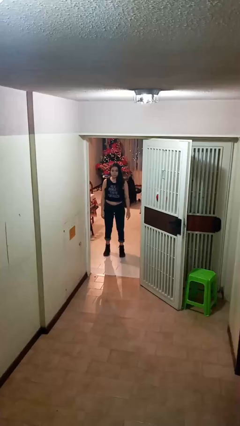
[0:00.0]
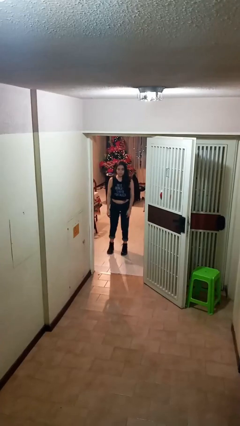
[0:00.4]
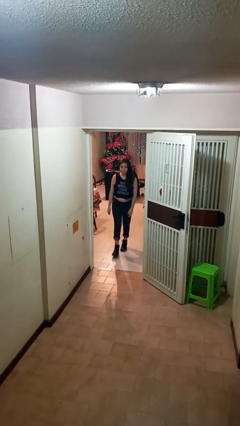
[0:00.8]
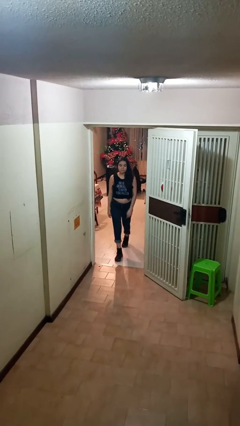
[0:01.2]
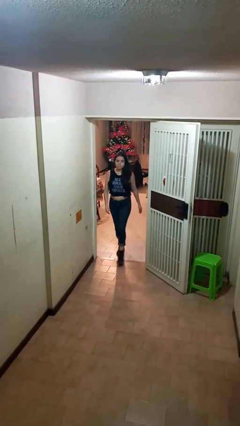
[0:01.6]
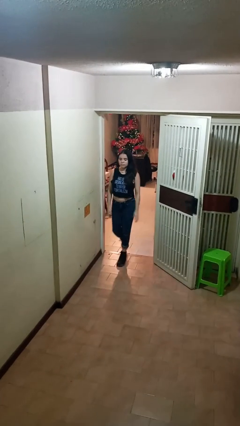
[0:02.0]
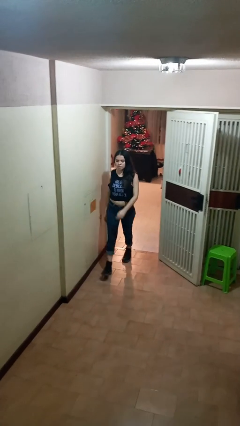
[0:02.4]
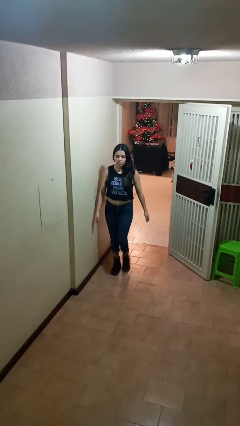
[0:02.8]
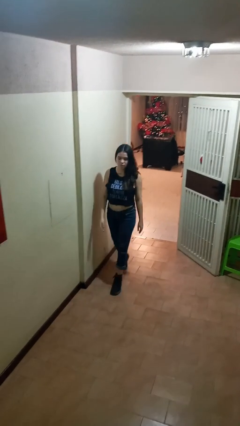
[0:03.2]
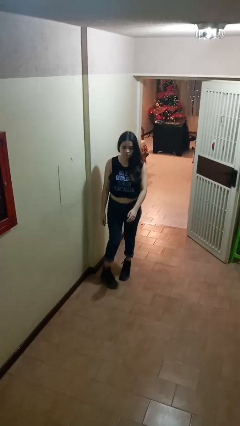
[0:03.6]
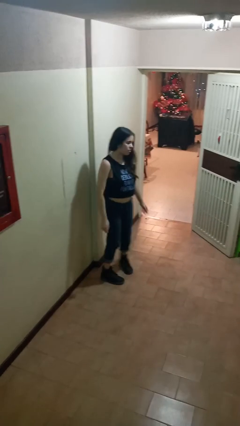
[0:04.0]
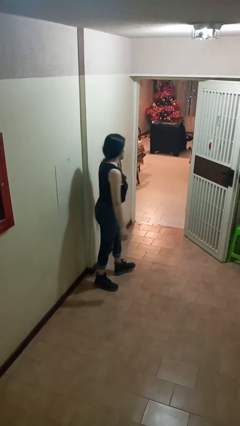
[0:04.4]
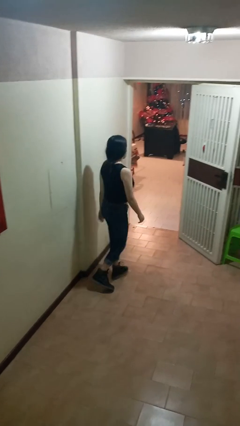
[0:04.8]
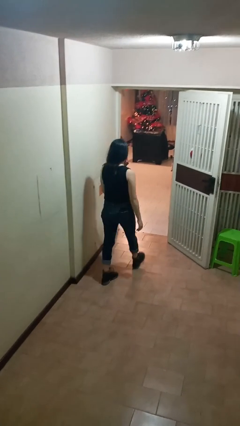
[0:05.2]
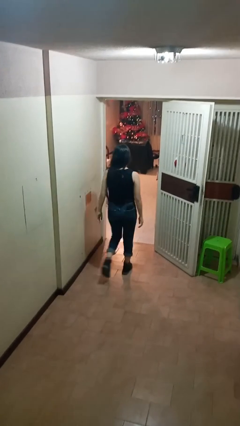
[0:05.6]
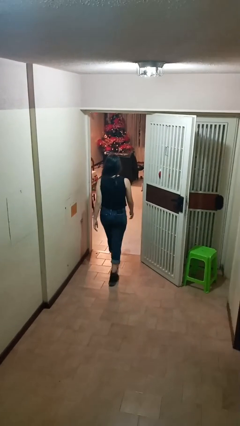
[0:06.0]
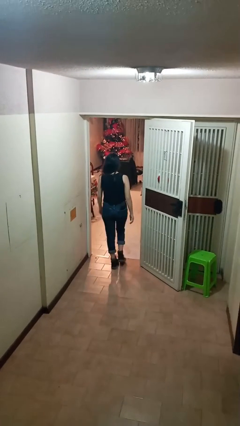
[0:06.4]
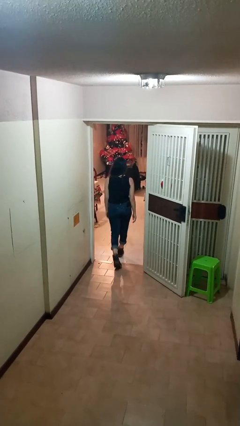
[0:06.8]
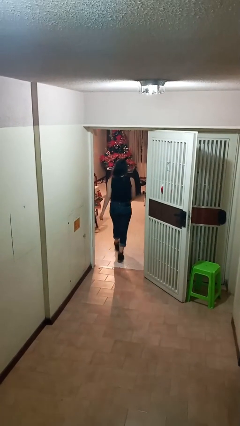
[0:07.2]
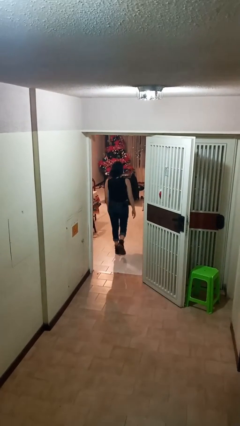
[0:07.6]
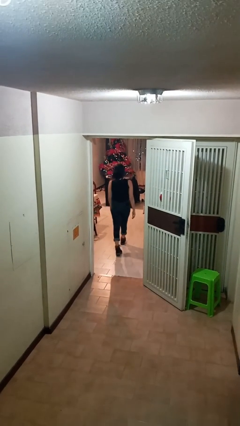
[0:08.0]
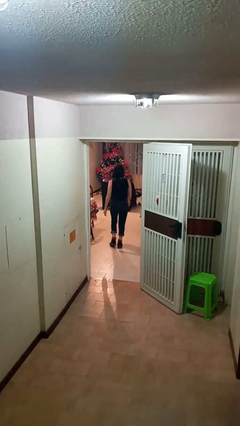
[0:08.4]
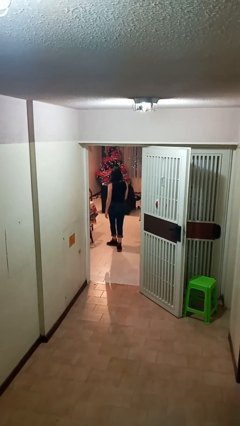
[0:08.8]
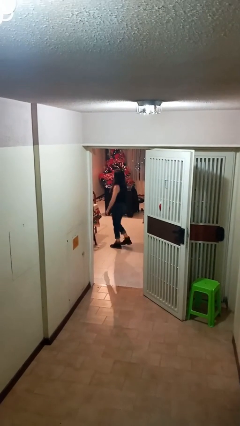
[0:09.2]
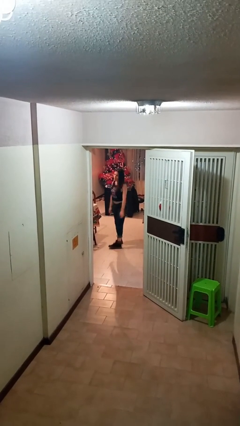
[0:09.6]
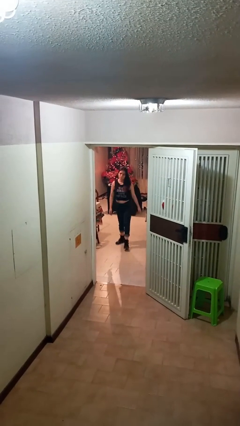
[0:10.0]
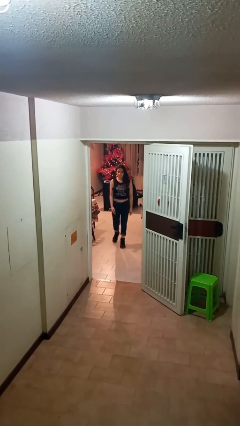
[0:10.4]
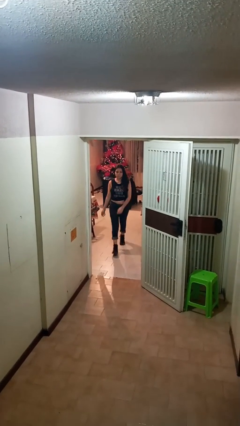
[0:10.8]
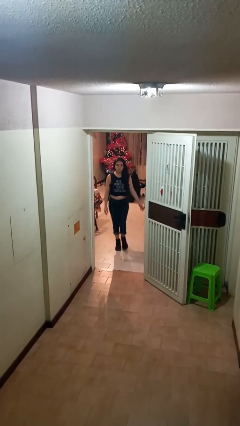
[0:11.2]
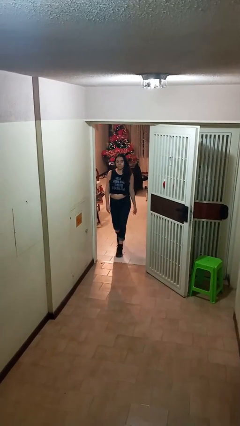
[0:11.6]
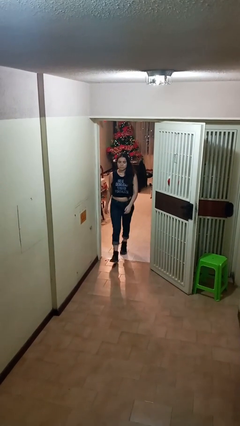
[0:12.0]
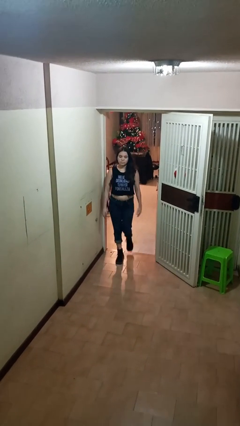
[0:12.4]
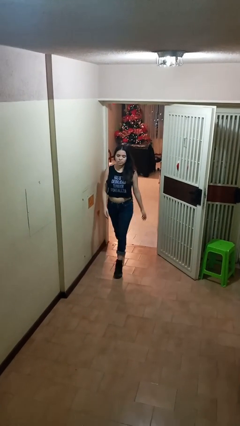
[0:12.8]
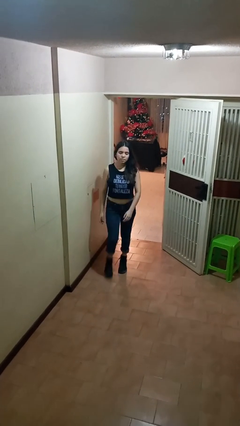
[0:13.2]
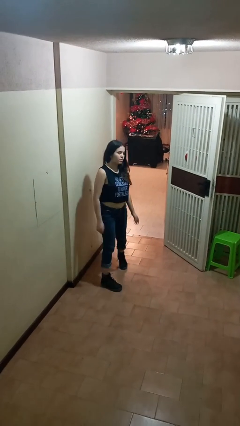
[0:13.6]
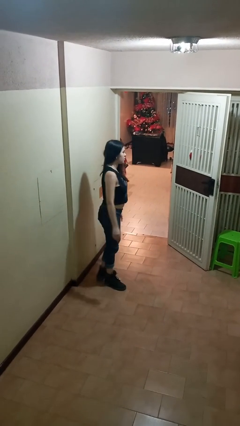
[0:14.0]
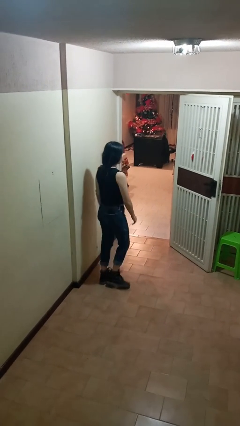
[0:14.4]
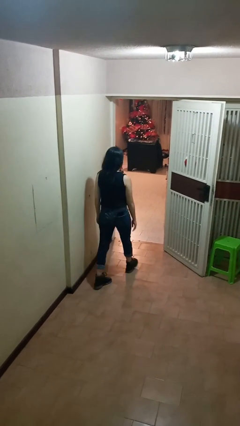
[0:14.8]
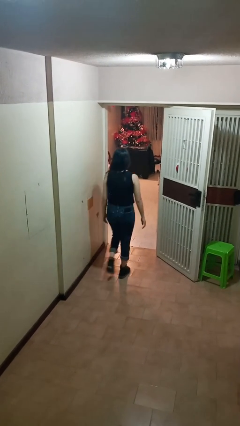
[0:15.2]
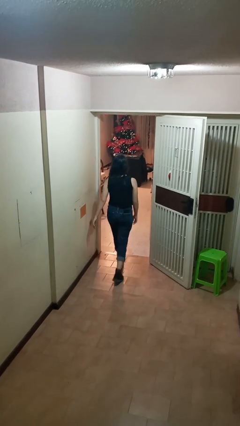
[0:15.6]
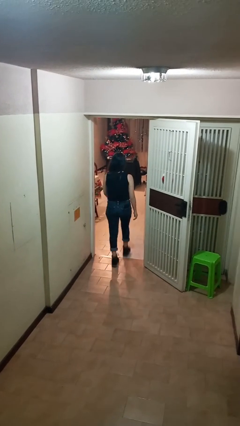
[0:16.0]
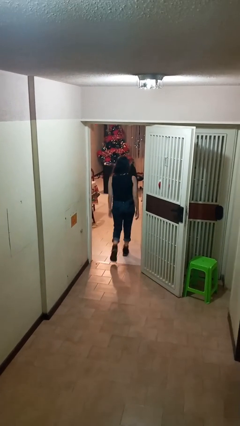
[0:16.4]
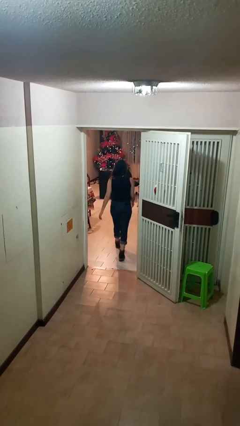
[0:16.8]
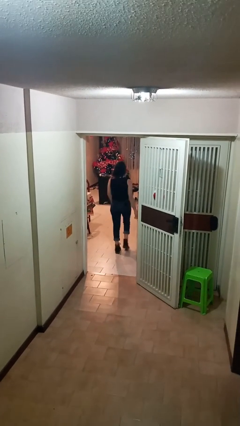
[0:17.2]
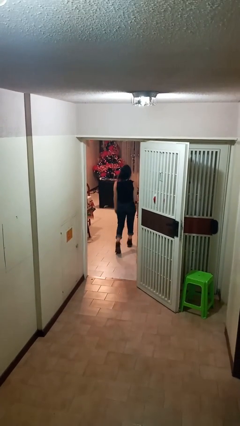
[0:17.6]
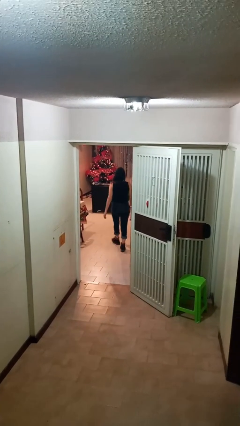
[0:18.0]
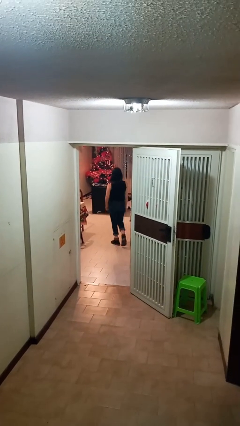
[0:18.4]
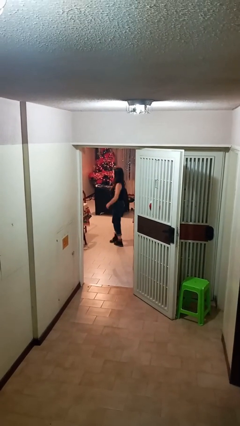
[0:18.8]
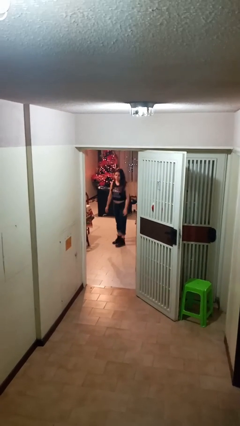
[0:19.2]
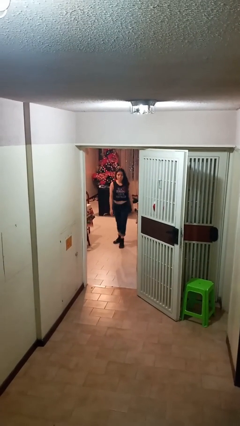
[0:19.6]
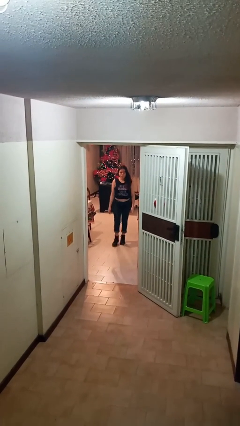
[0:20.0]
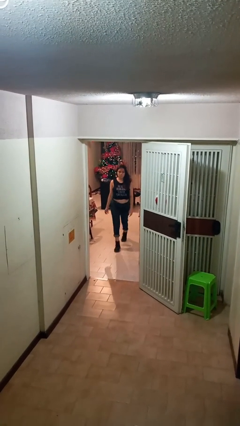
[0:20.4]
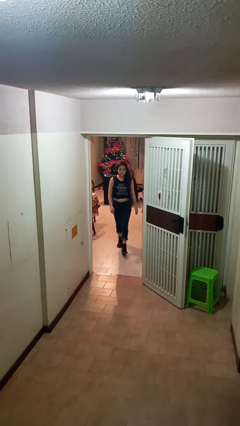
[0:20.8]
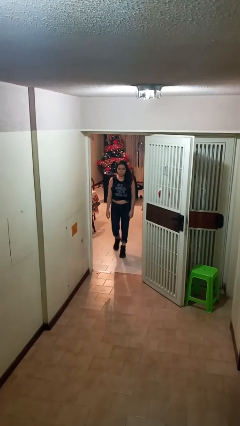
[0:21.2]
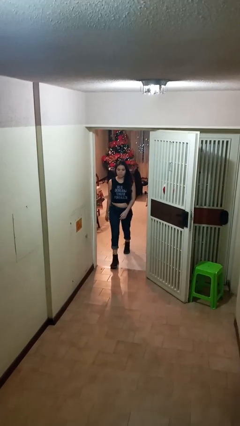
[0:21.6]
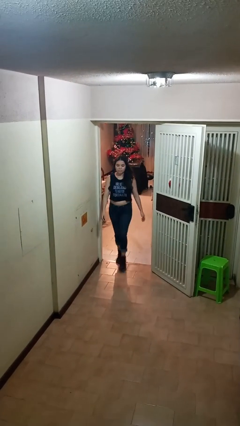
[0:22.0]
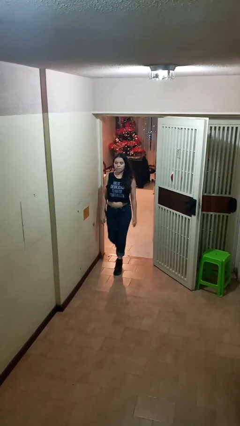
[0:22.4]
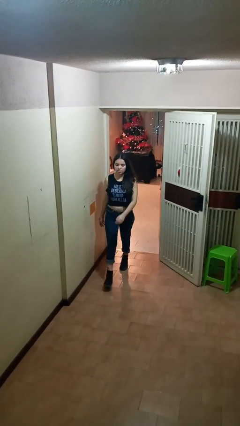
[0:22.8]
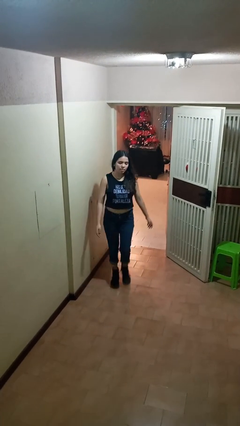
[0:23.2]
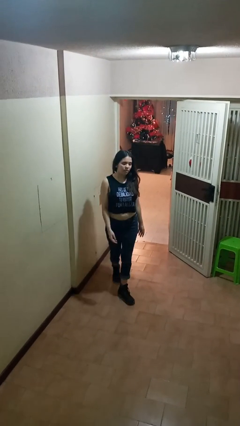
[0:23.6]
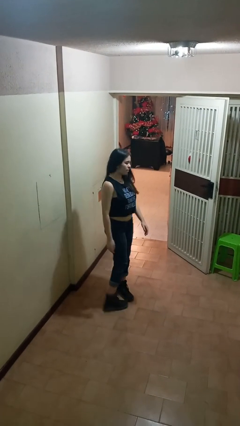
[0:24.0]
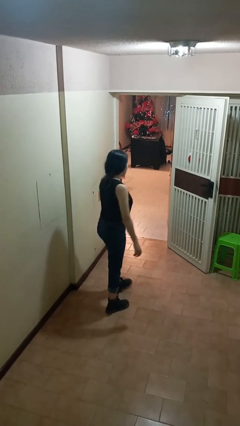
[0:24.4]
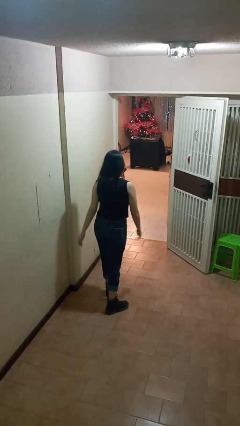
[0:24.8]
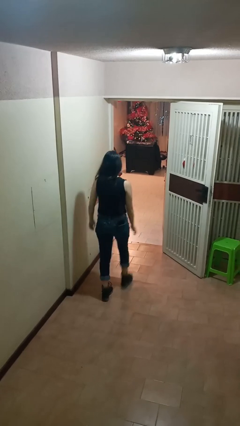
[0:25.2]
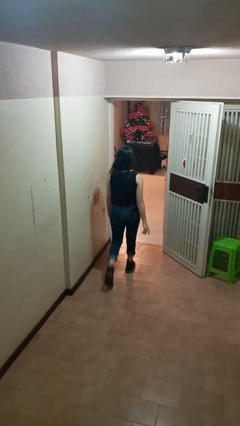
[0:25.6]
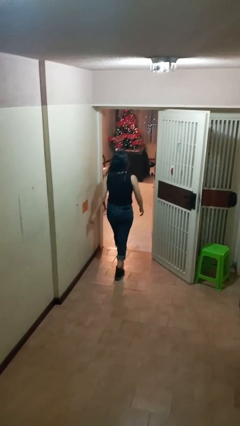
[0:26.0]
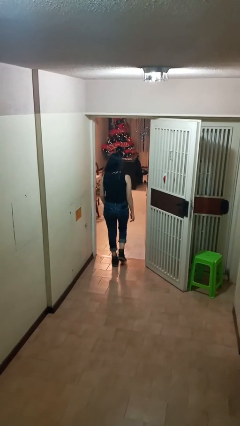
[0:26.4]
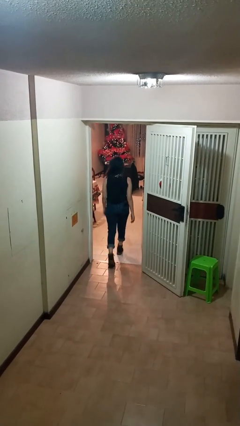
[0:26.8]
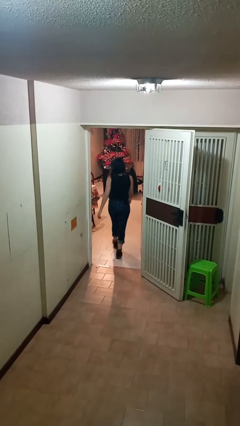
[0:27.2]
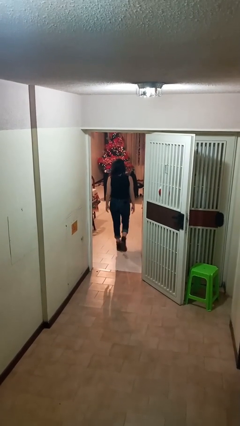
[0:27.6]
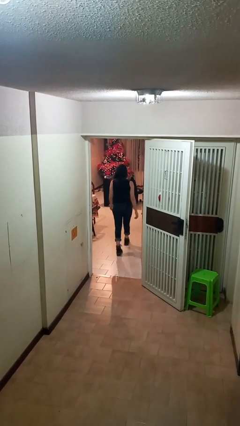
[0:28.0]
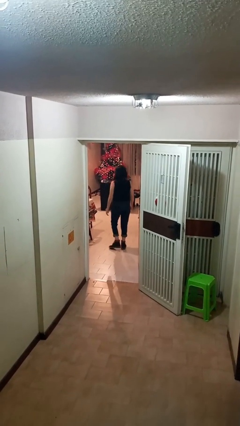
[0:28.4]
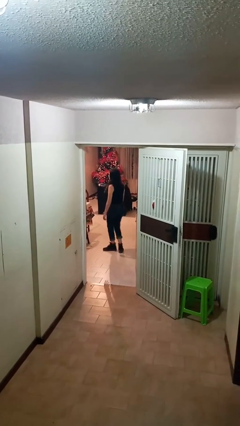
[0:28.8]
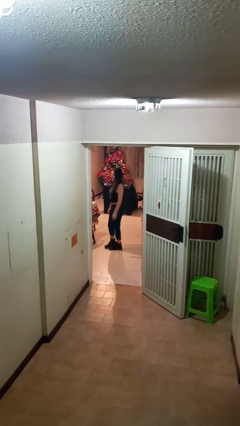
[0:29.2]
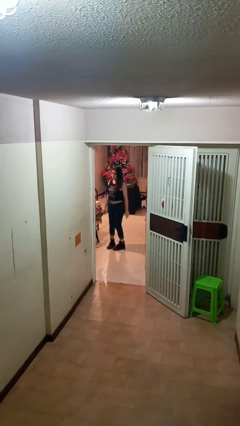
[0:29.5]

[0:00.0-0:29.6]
person walks

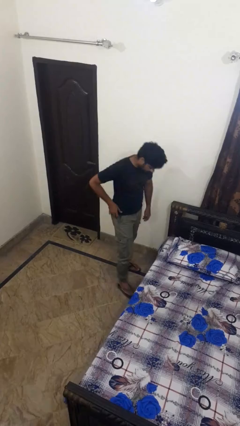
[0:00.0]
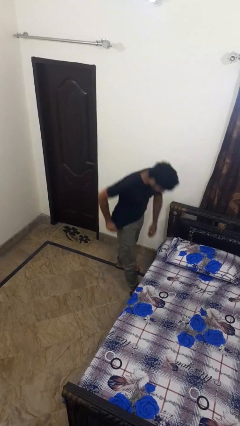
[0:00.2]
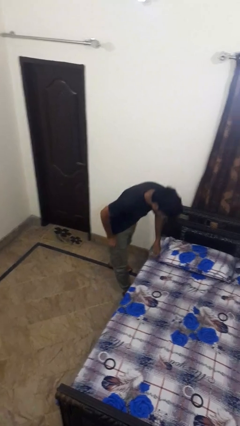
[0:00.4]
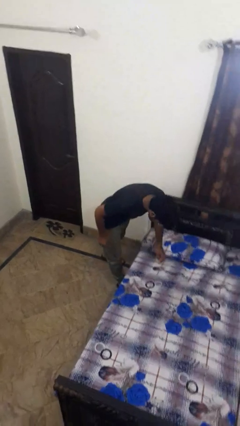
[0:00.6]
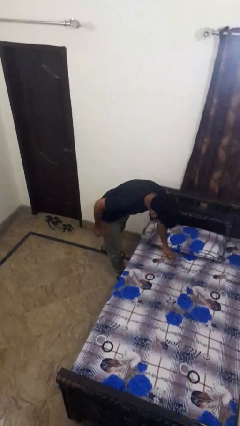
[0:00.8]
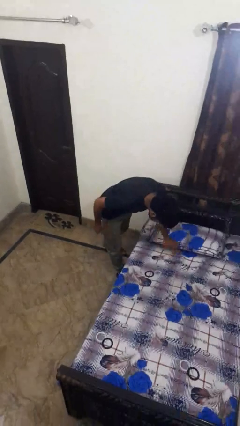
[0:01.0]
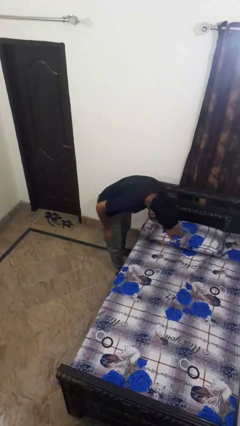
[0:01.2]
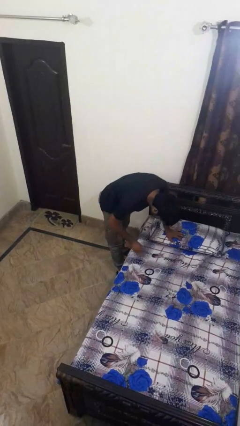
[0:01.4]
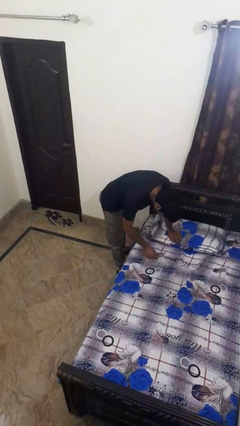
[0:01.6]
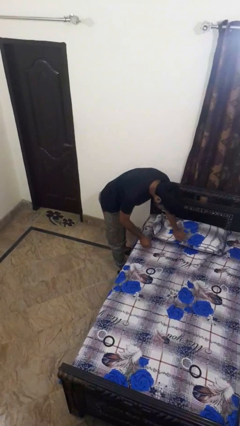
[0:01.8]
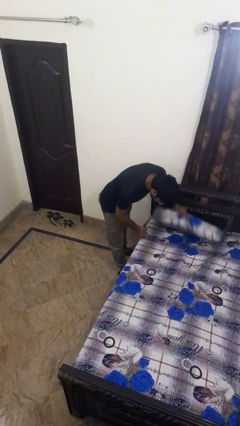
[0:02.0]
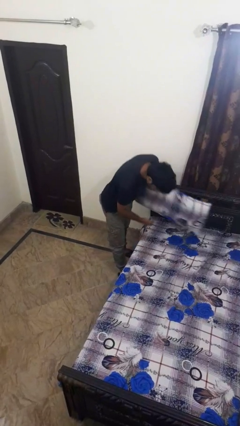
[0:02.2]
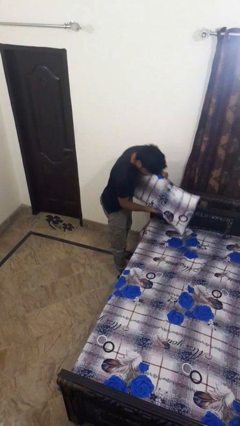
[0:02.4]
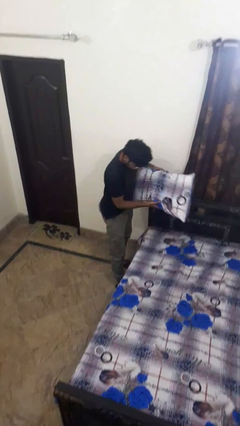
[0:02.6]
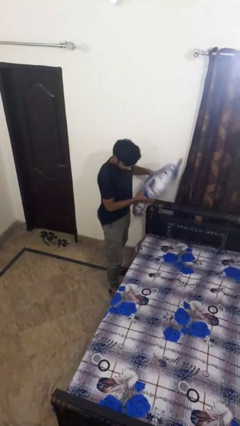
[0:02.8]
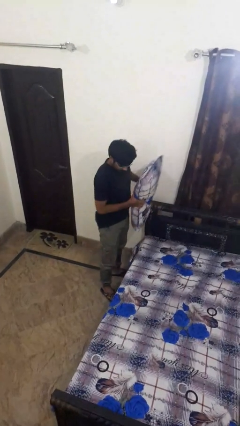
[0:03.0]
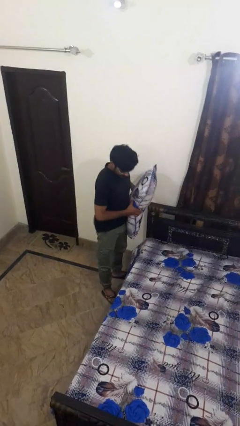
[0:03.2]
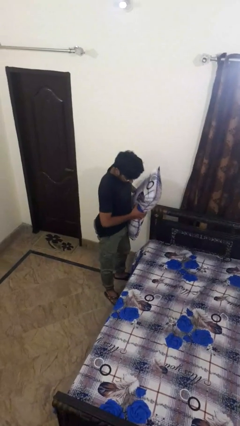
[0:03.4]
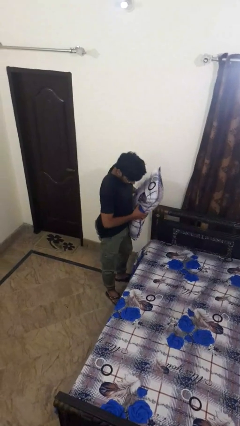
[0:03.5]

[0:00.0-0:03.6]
person picks up object from bed
